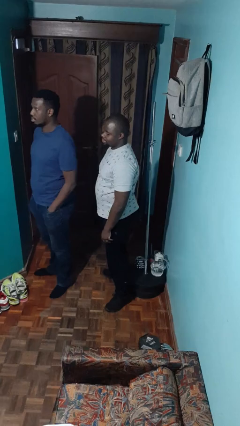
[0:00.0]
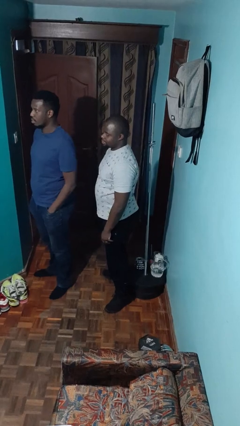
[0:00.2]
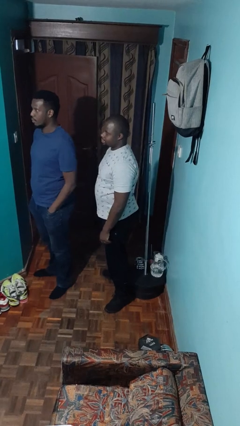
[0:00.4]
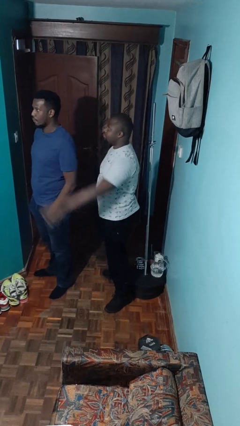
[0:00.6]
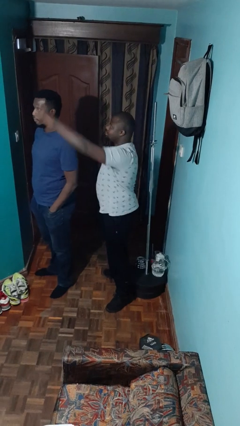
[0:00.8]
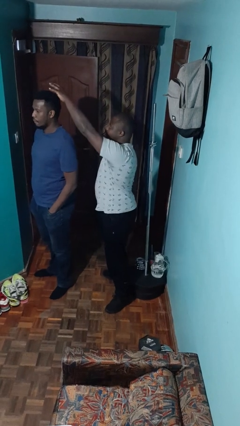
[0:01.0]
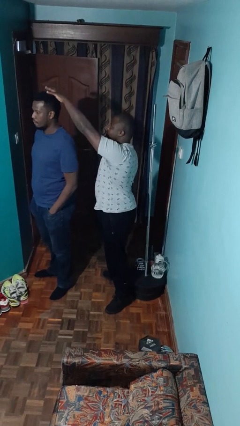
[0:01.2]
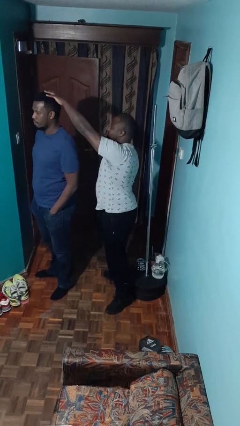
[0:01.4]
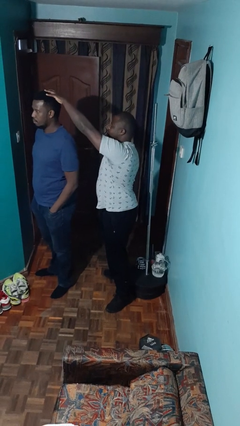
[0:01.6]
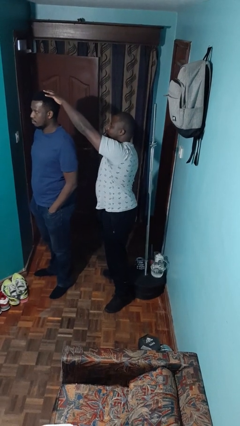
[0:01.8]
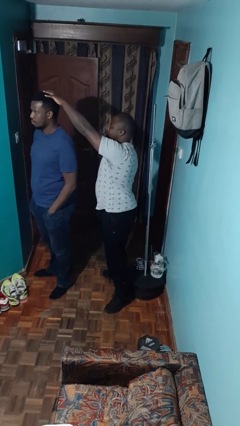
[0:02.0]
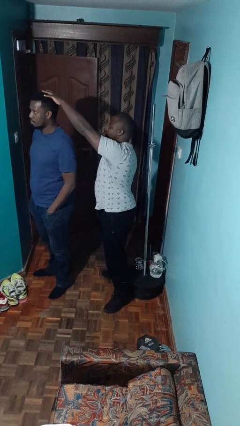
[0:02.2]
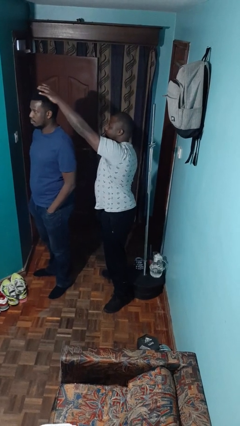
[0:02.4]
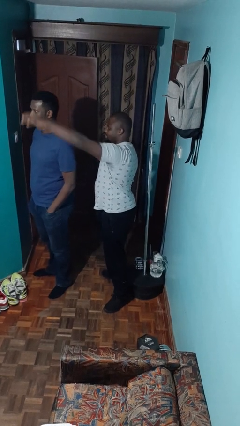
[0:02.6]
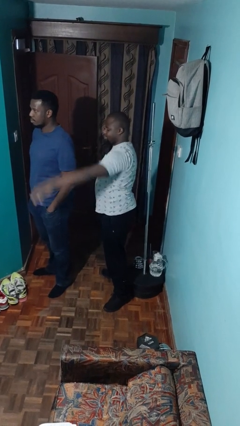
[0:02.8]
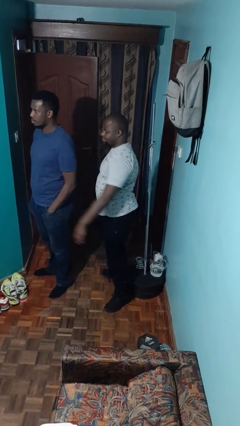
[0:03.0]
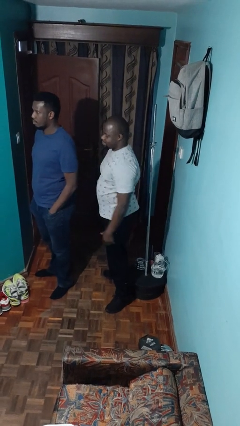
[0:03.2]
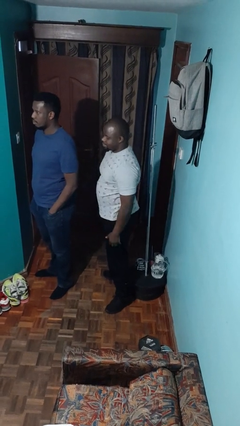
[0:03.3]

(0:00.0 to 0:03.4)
person grabs person by hair

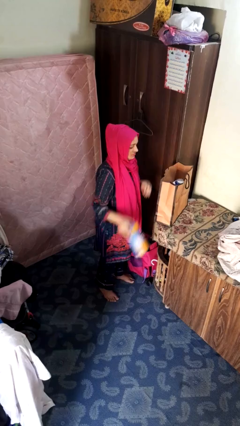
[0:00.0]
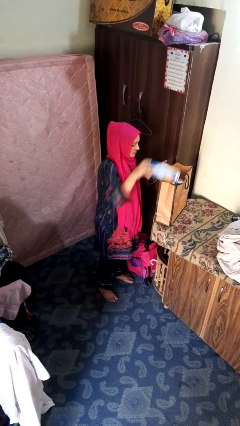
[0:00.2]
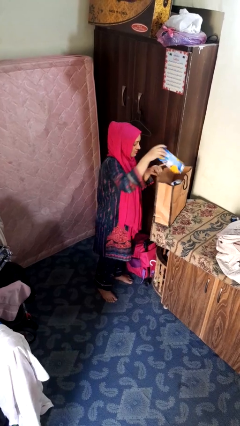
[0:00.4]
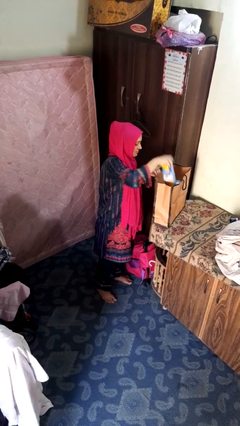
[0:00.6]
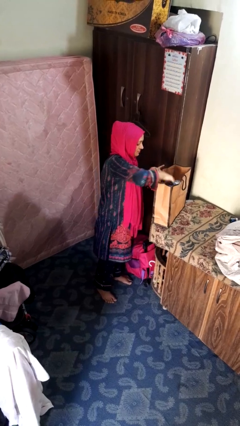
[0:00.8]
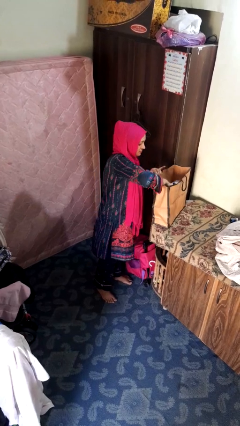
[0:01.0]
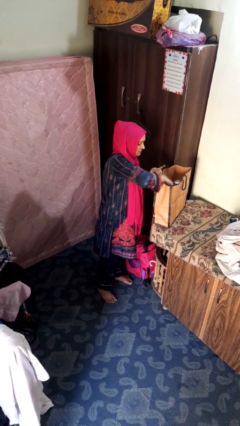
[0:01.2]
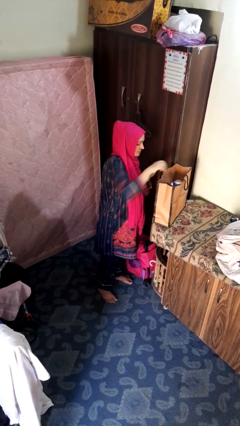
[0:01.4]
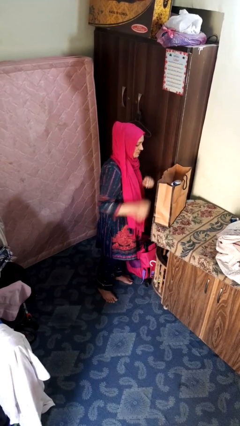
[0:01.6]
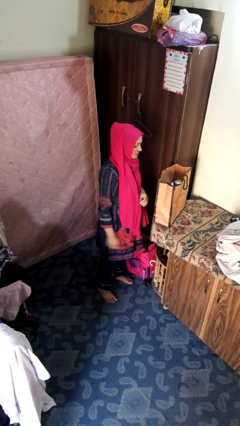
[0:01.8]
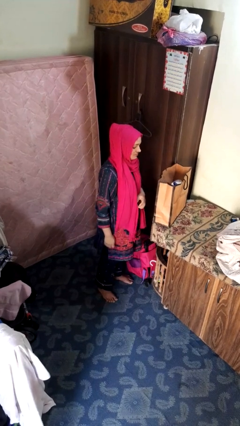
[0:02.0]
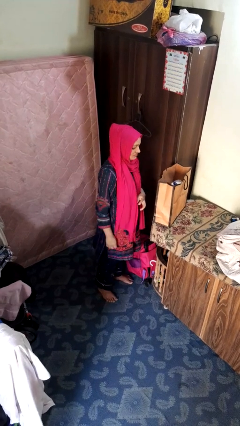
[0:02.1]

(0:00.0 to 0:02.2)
person puts object into bag

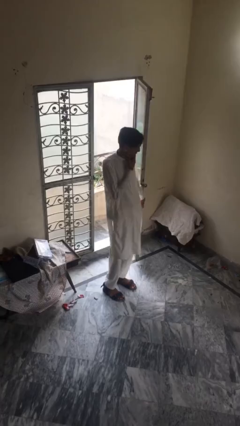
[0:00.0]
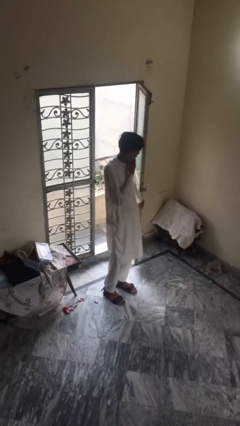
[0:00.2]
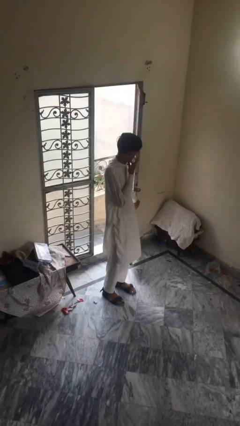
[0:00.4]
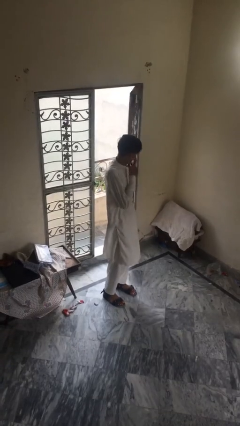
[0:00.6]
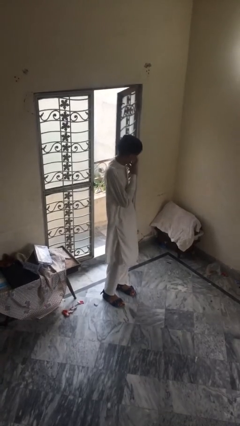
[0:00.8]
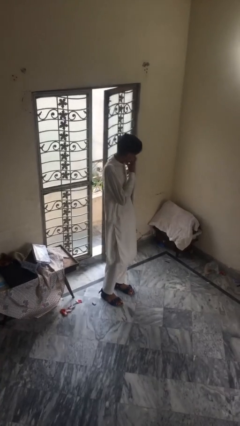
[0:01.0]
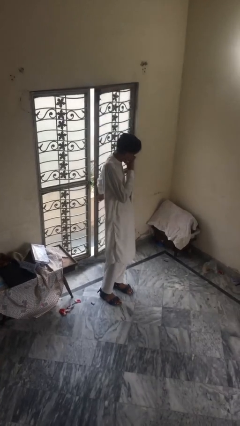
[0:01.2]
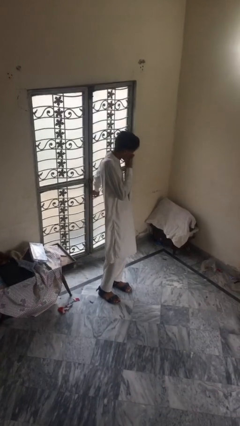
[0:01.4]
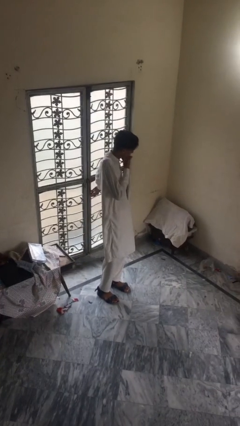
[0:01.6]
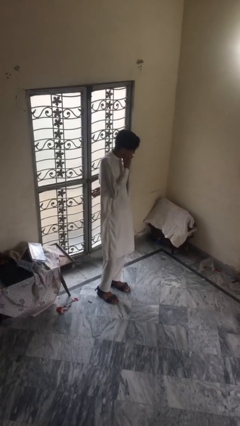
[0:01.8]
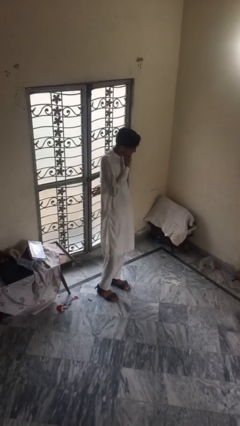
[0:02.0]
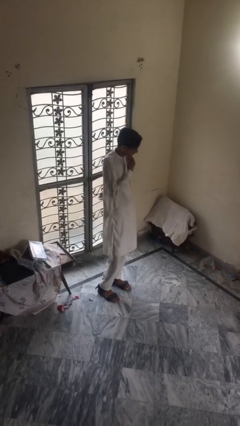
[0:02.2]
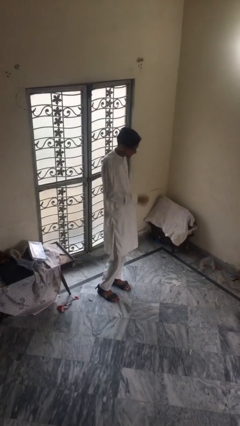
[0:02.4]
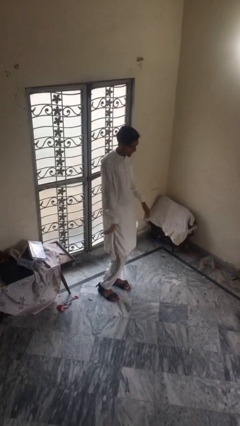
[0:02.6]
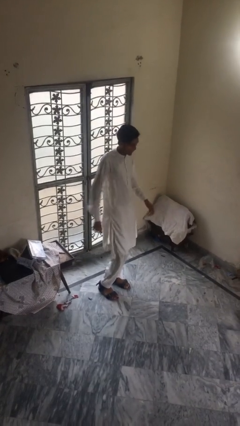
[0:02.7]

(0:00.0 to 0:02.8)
person closes facility door

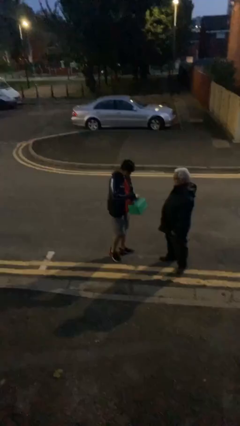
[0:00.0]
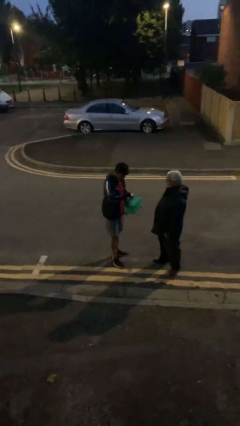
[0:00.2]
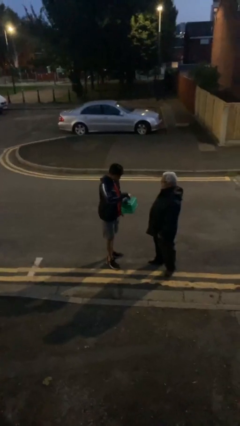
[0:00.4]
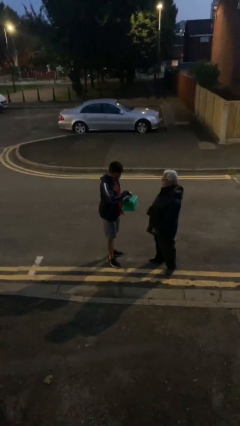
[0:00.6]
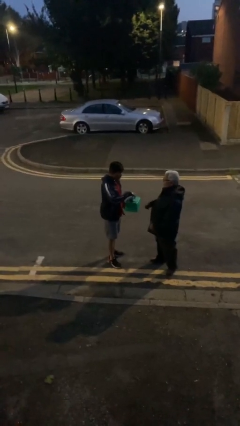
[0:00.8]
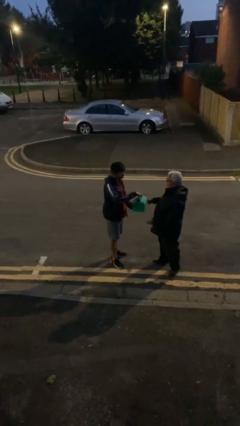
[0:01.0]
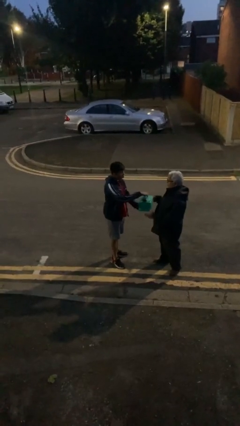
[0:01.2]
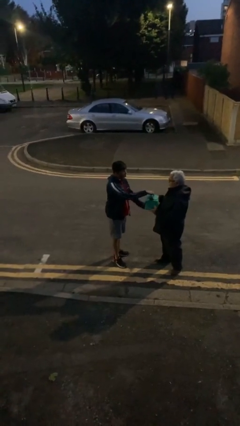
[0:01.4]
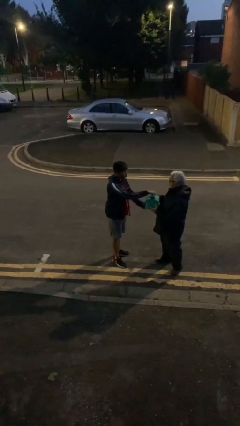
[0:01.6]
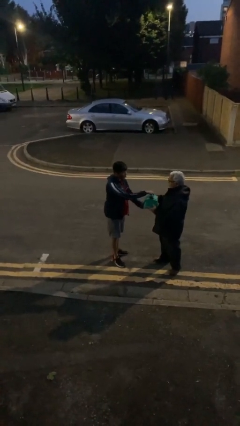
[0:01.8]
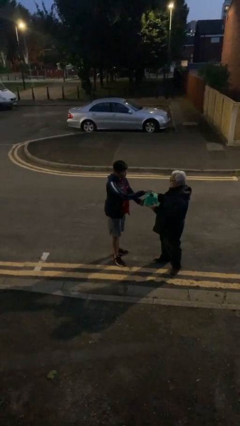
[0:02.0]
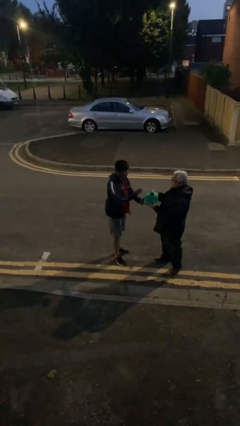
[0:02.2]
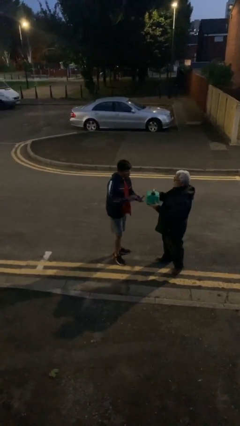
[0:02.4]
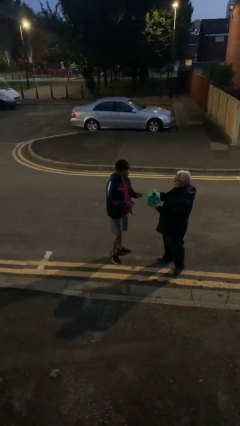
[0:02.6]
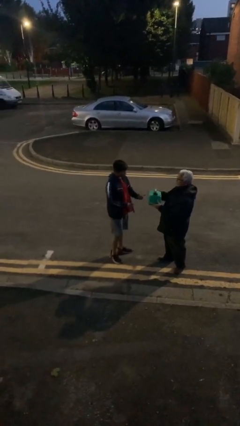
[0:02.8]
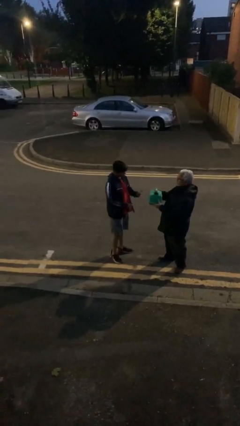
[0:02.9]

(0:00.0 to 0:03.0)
person transfers object to person

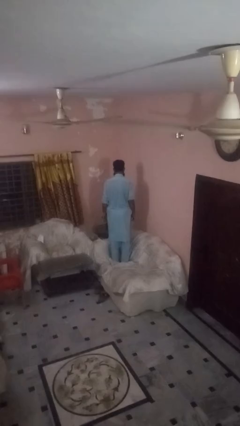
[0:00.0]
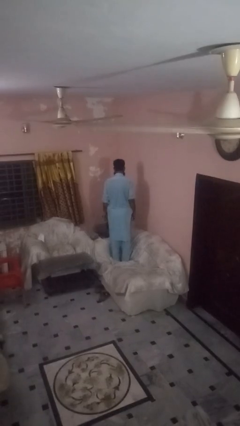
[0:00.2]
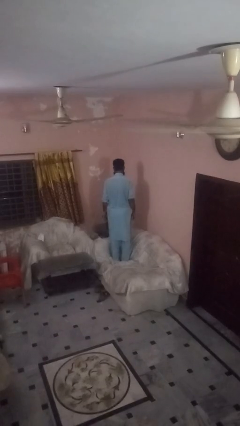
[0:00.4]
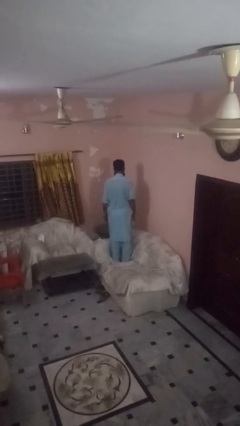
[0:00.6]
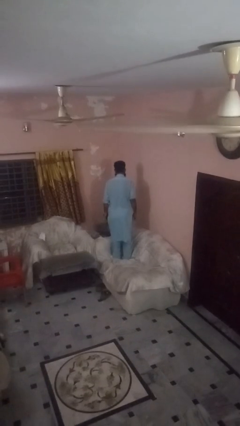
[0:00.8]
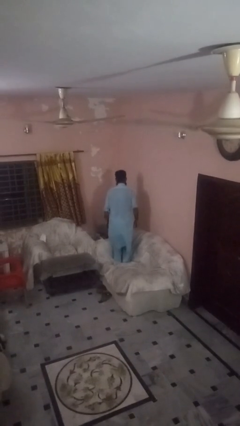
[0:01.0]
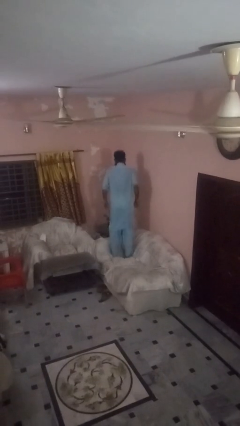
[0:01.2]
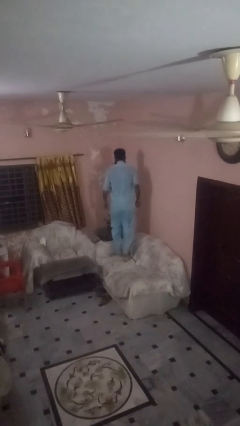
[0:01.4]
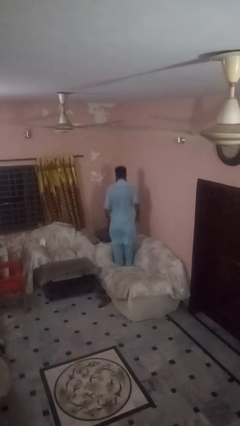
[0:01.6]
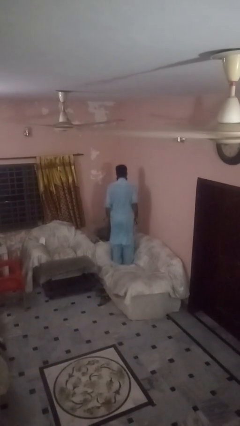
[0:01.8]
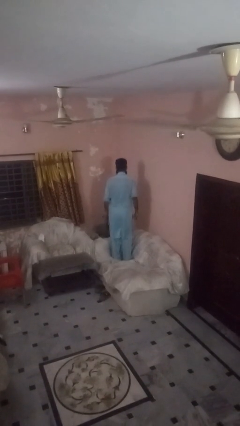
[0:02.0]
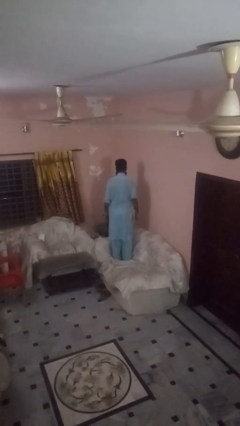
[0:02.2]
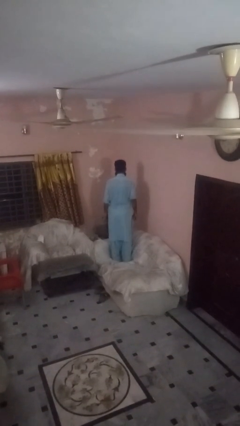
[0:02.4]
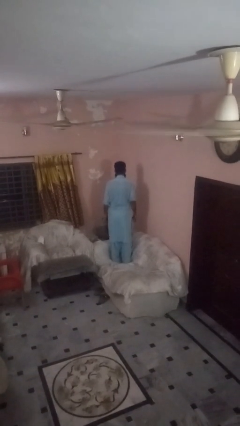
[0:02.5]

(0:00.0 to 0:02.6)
person jumps on couch

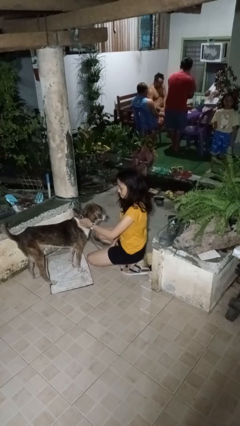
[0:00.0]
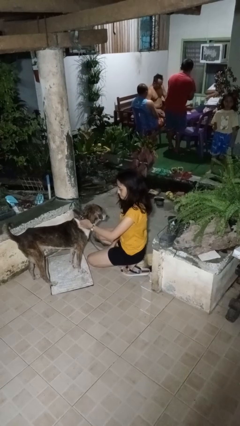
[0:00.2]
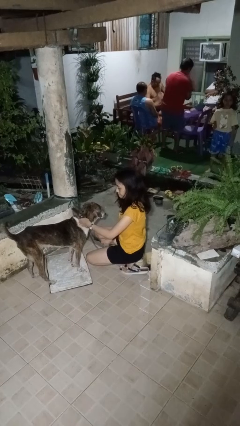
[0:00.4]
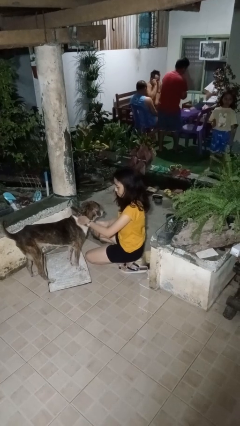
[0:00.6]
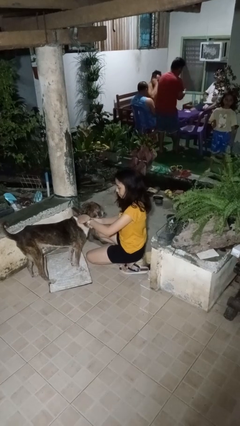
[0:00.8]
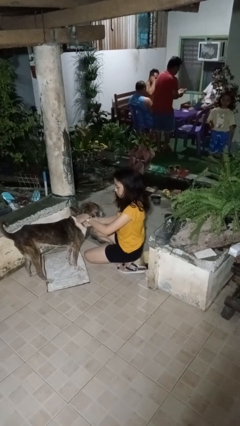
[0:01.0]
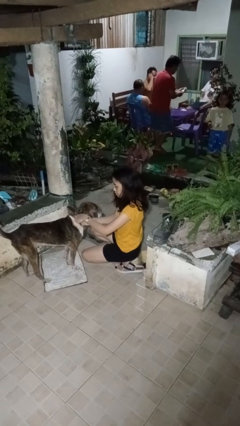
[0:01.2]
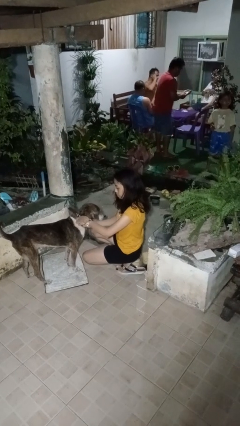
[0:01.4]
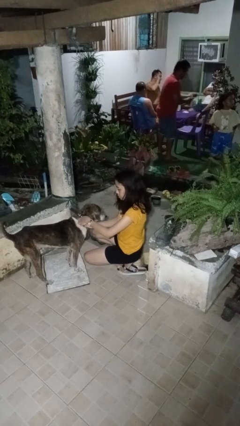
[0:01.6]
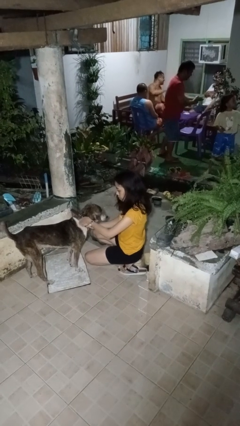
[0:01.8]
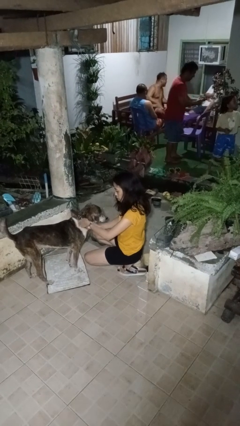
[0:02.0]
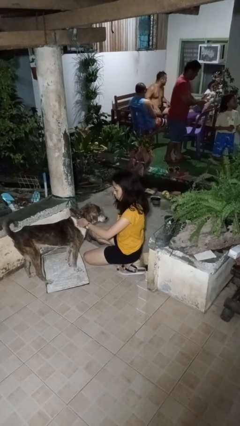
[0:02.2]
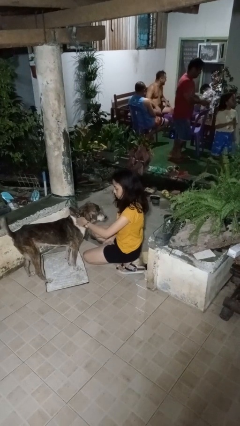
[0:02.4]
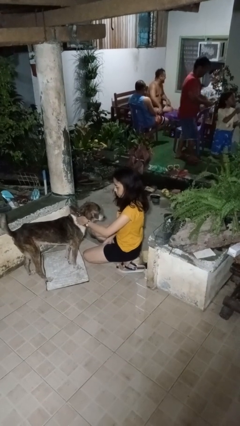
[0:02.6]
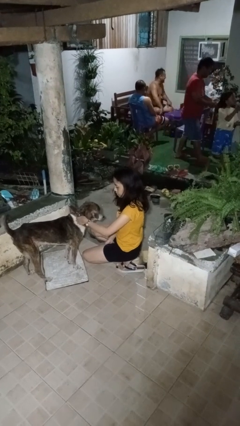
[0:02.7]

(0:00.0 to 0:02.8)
person attaches leash to dog

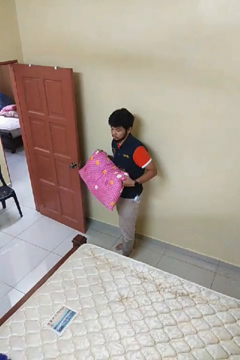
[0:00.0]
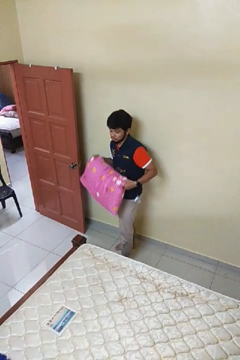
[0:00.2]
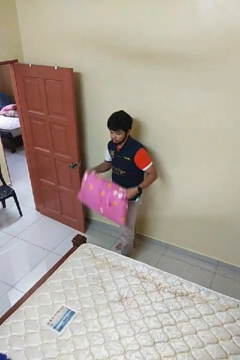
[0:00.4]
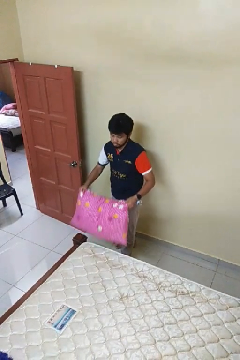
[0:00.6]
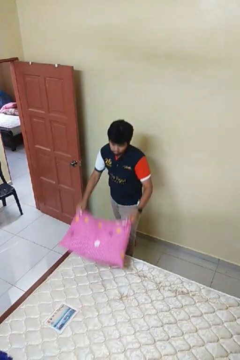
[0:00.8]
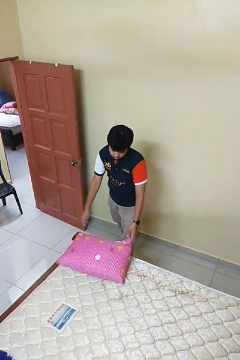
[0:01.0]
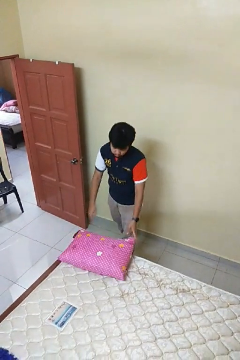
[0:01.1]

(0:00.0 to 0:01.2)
person puts down object on bed
